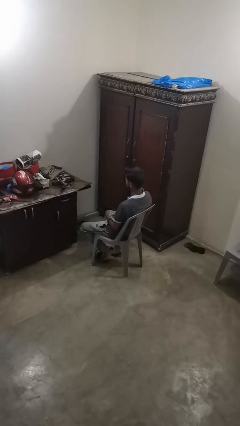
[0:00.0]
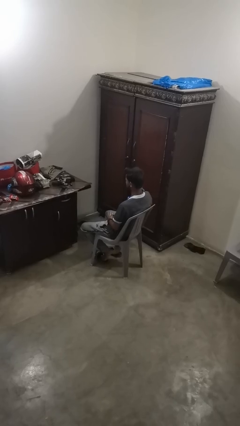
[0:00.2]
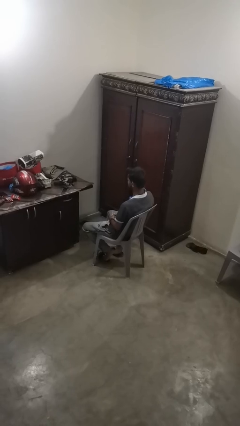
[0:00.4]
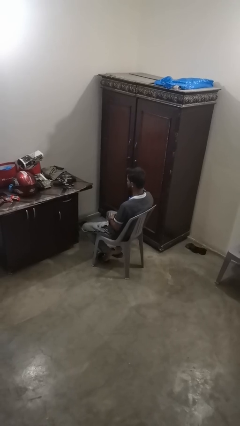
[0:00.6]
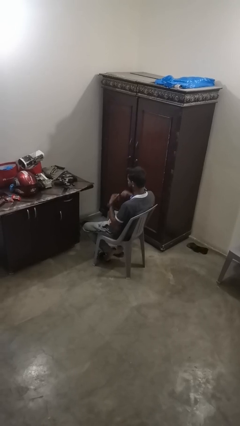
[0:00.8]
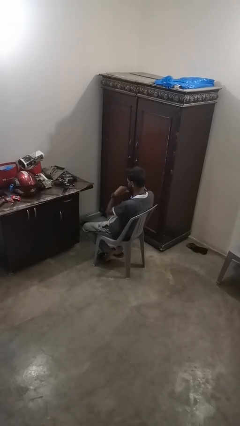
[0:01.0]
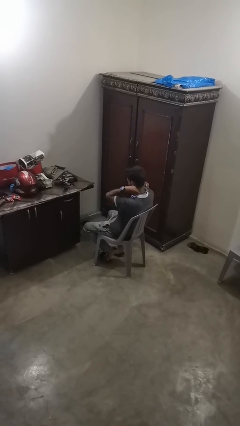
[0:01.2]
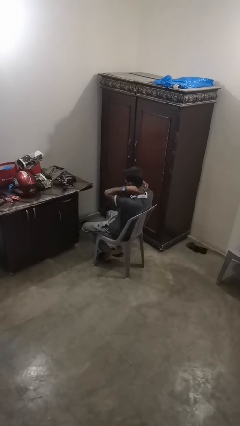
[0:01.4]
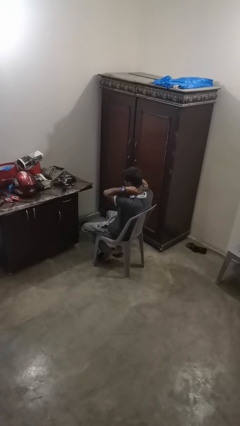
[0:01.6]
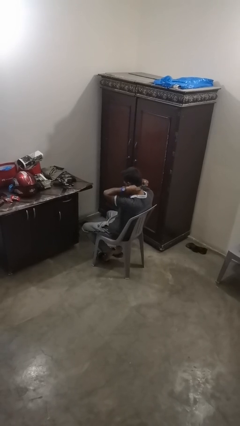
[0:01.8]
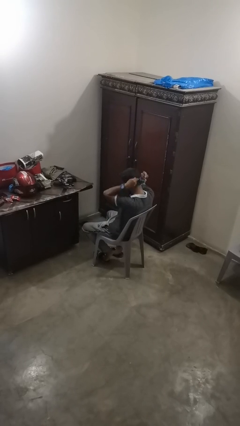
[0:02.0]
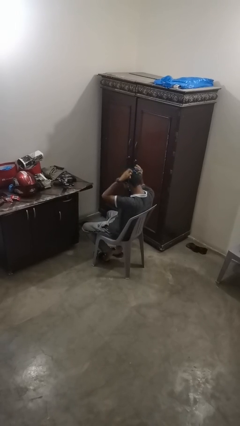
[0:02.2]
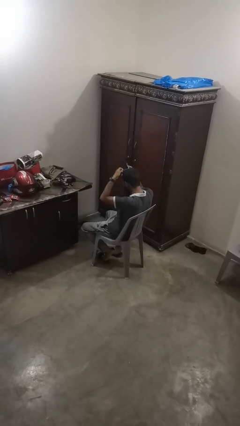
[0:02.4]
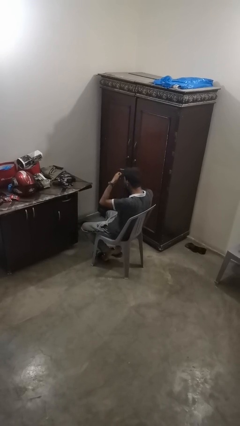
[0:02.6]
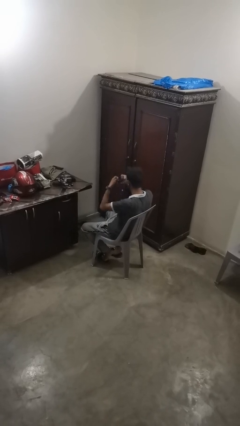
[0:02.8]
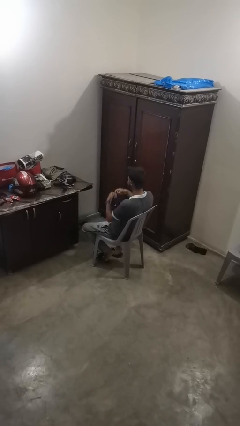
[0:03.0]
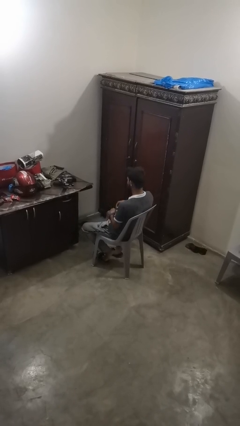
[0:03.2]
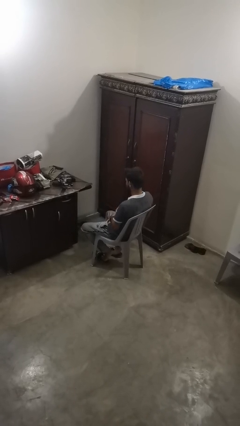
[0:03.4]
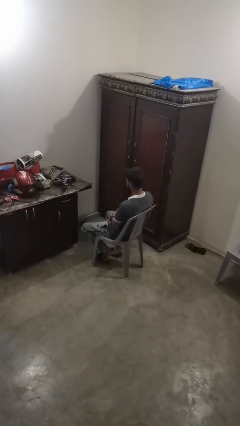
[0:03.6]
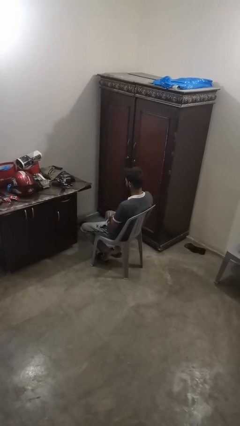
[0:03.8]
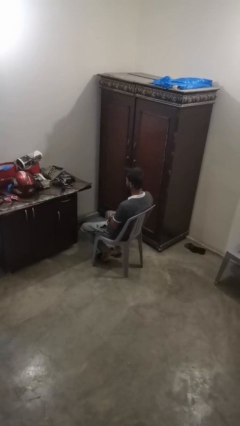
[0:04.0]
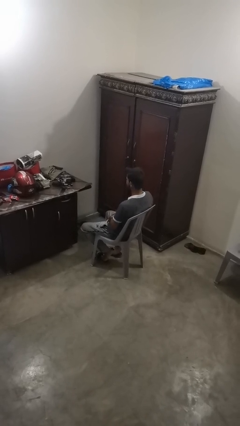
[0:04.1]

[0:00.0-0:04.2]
person takes off necklace

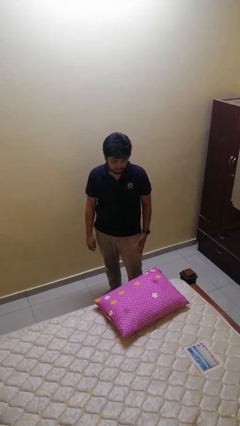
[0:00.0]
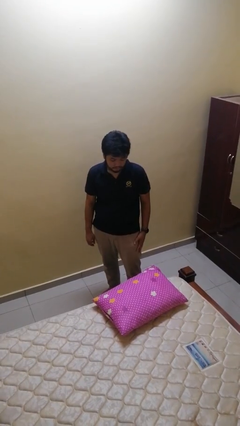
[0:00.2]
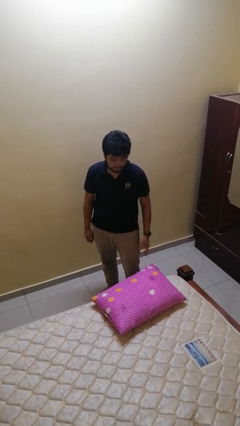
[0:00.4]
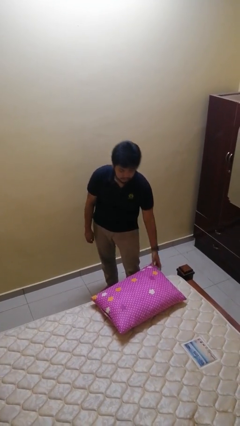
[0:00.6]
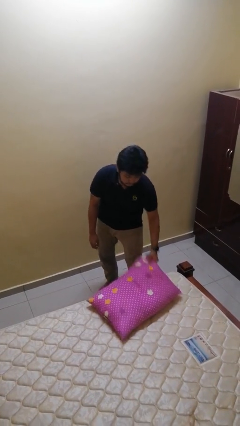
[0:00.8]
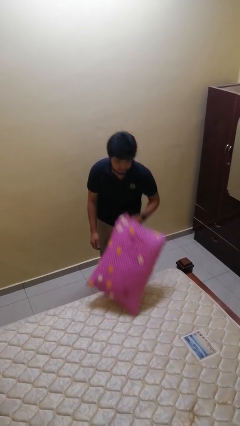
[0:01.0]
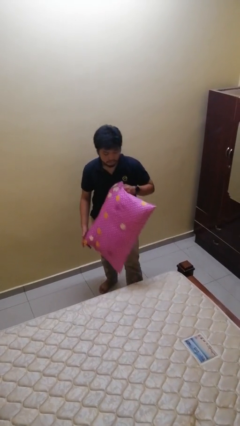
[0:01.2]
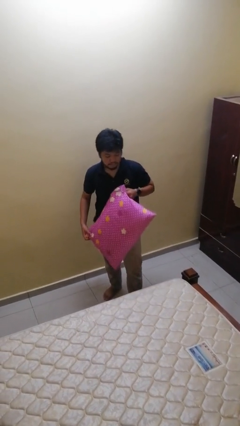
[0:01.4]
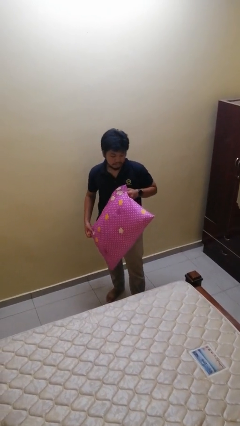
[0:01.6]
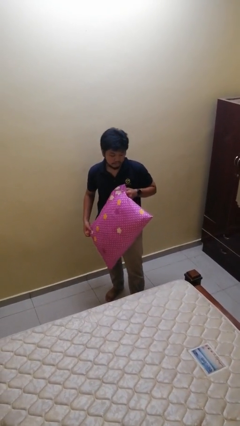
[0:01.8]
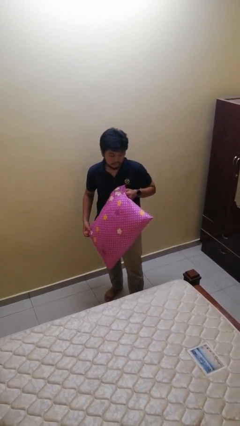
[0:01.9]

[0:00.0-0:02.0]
person picks up object from bed

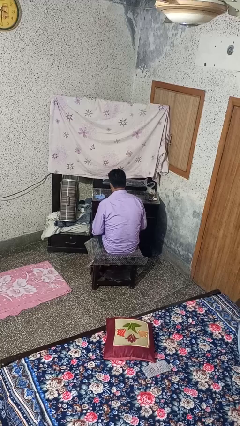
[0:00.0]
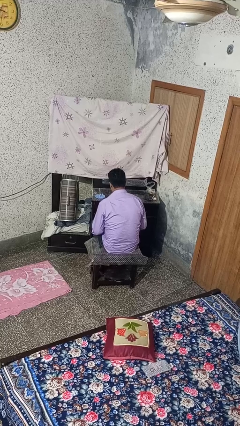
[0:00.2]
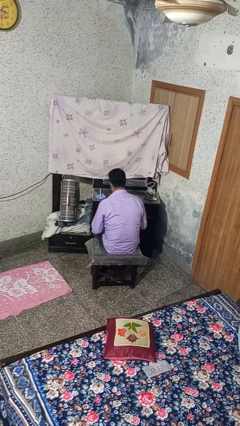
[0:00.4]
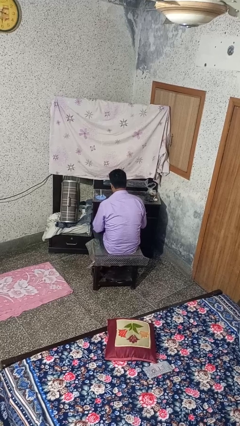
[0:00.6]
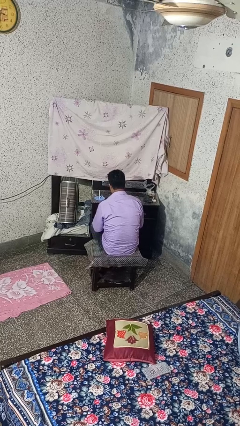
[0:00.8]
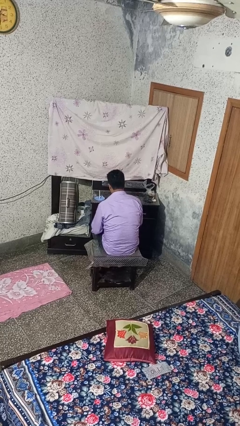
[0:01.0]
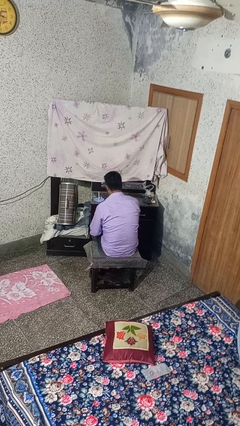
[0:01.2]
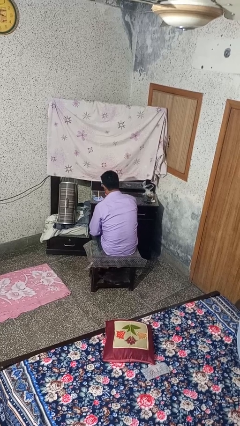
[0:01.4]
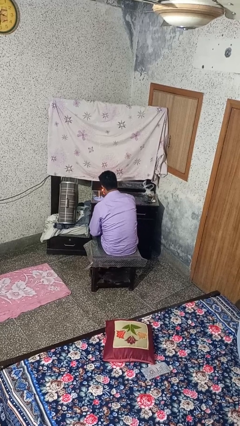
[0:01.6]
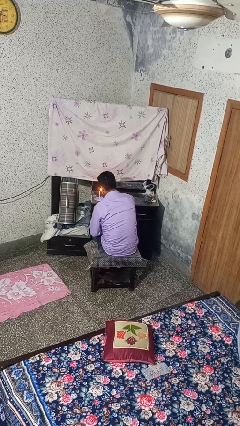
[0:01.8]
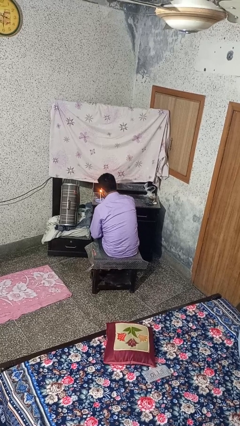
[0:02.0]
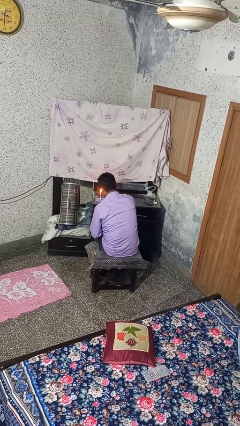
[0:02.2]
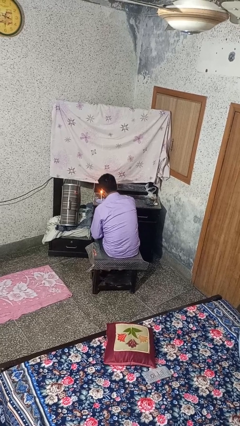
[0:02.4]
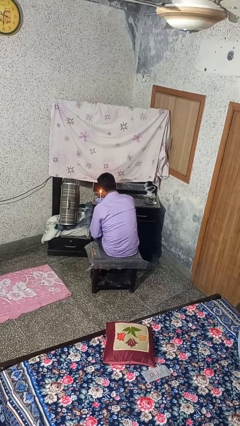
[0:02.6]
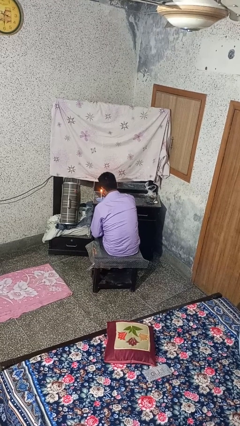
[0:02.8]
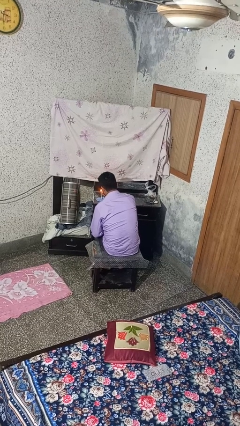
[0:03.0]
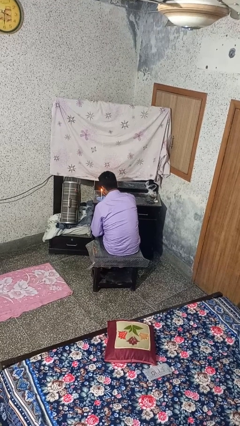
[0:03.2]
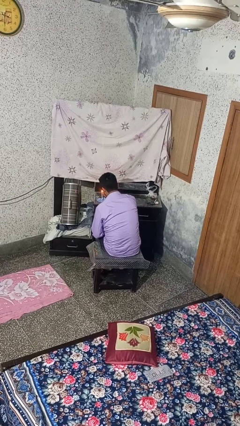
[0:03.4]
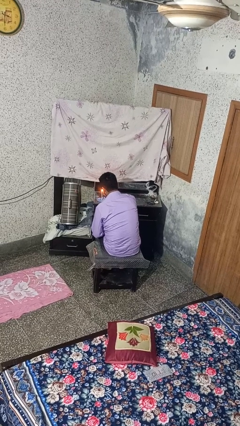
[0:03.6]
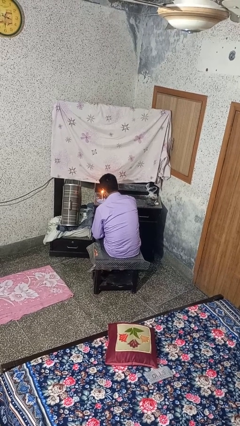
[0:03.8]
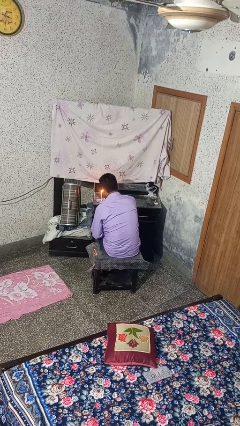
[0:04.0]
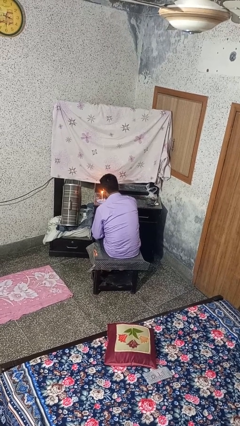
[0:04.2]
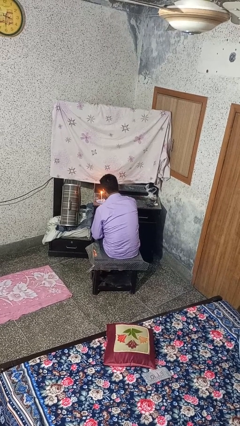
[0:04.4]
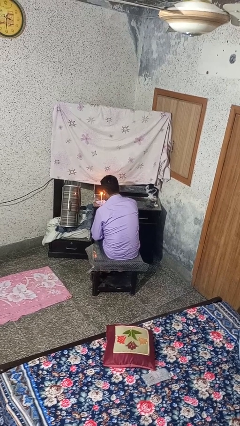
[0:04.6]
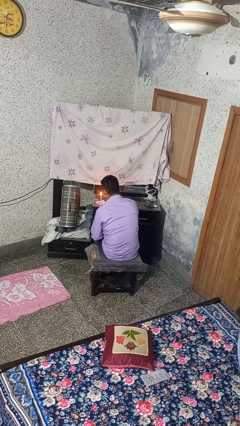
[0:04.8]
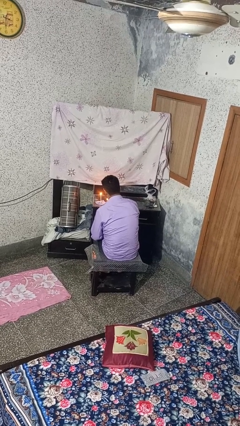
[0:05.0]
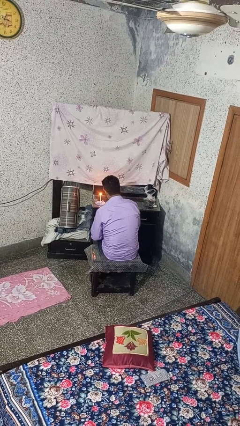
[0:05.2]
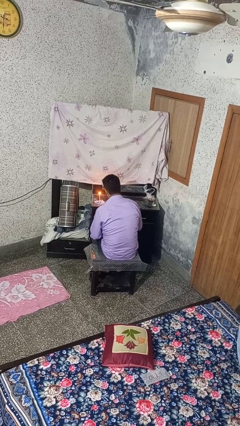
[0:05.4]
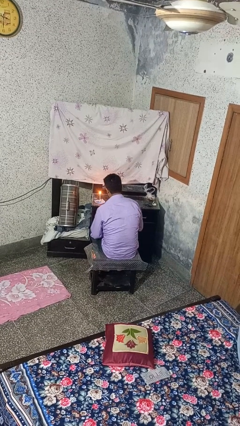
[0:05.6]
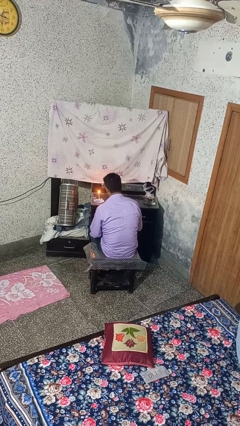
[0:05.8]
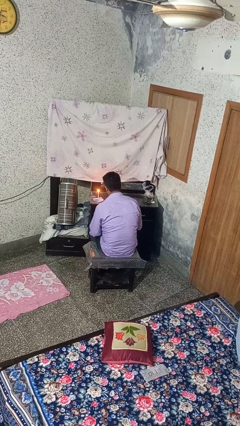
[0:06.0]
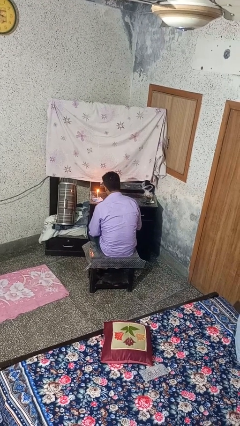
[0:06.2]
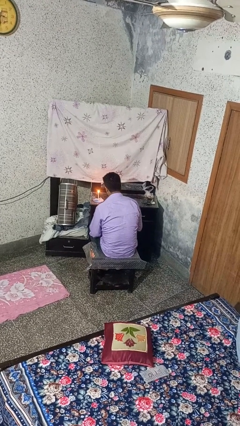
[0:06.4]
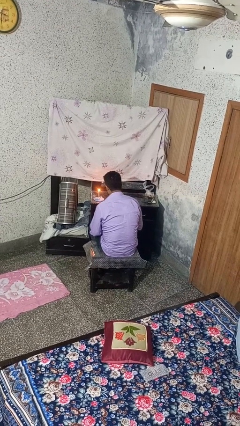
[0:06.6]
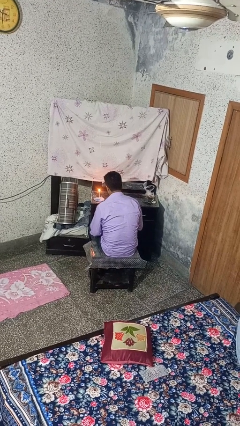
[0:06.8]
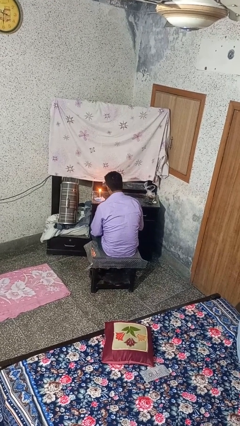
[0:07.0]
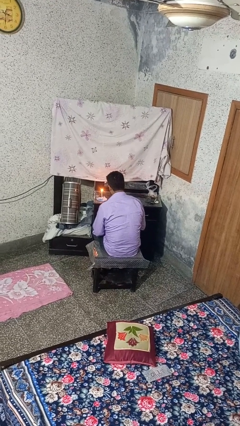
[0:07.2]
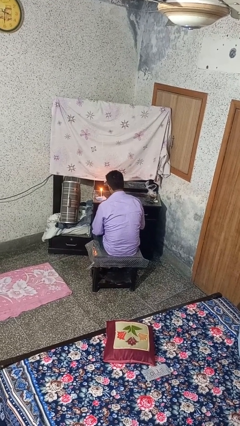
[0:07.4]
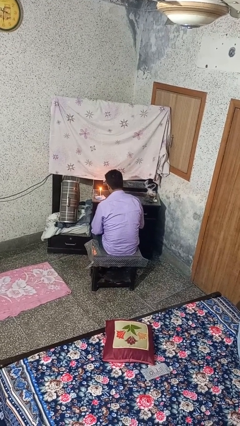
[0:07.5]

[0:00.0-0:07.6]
person lights candle

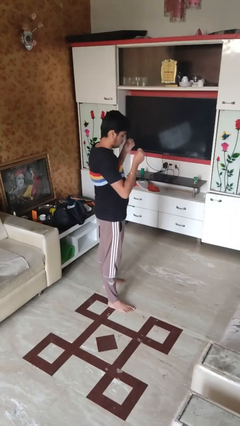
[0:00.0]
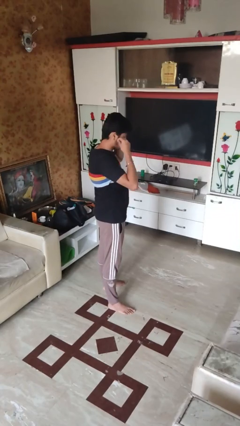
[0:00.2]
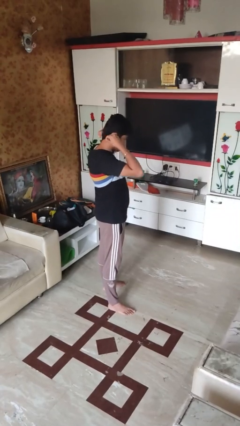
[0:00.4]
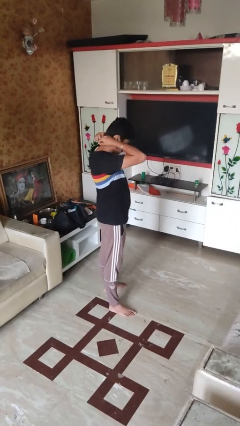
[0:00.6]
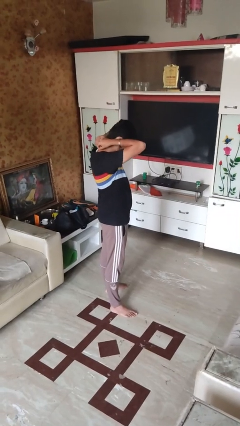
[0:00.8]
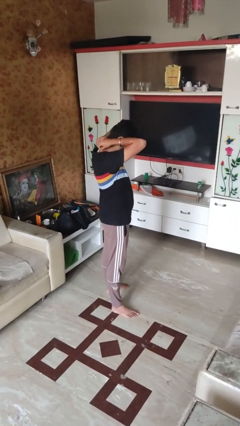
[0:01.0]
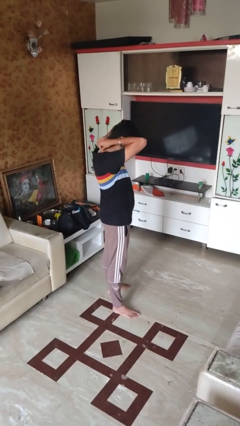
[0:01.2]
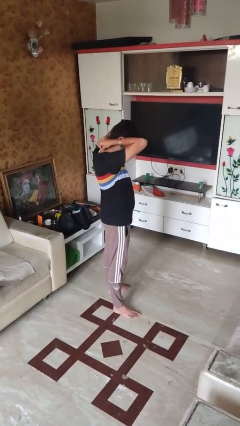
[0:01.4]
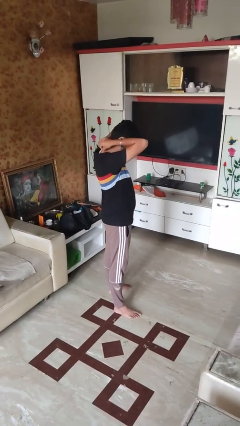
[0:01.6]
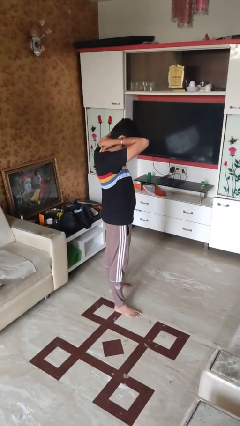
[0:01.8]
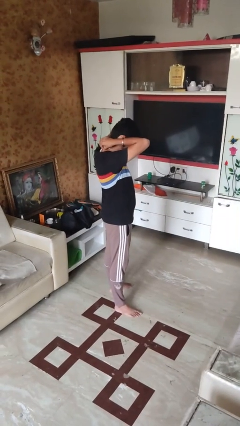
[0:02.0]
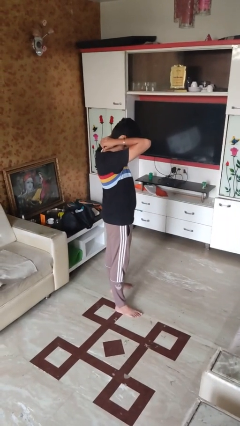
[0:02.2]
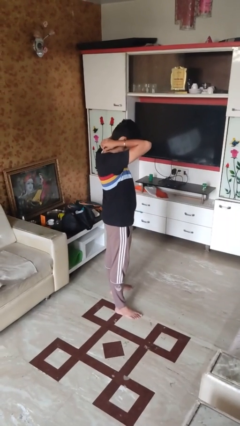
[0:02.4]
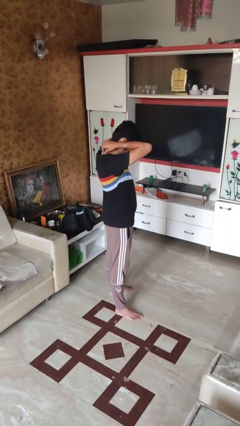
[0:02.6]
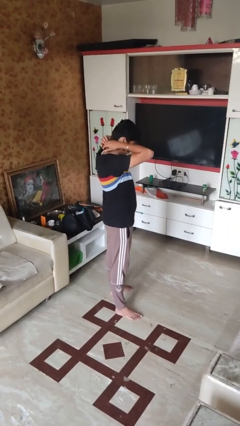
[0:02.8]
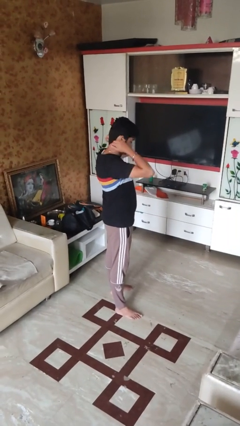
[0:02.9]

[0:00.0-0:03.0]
person puts on necklace

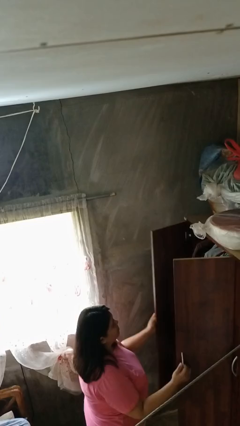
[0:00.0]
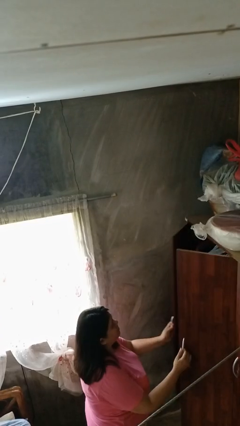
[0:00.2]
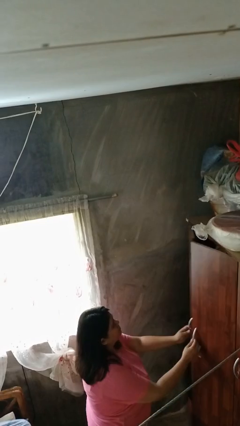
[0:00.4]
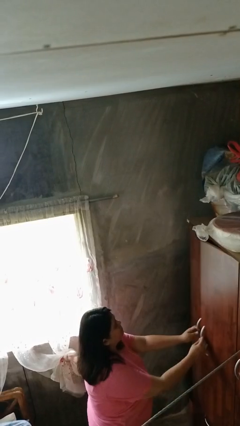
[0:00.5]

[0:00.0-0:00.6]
person closes closet door

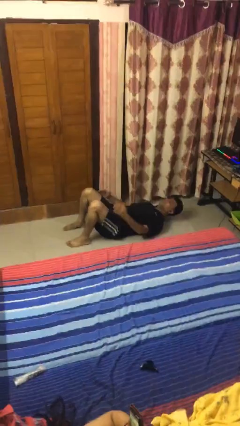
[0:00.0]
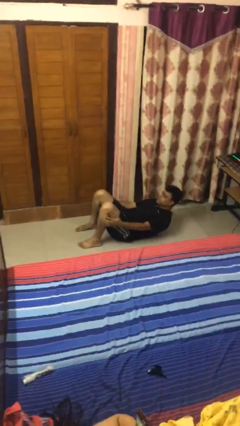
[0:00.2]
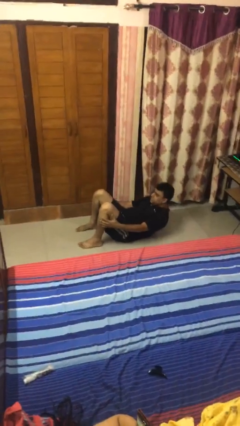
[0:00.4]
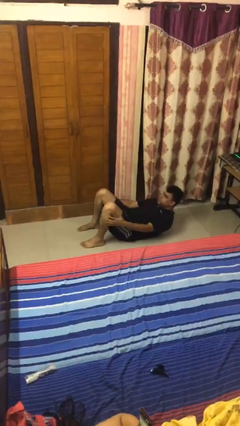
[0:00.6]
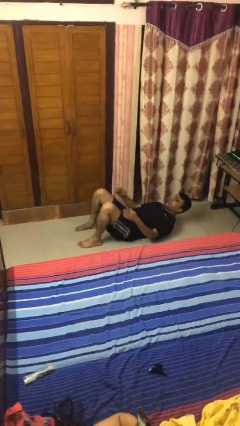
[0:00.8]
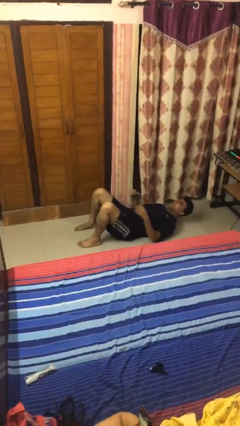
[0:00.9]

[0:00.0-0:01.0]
person exercises with situp
